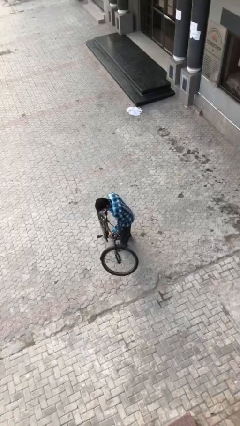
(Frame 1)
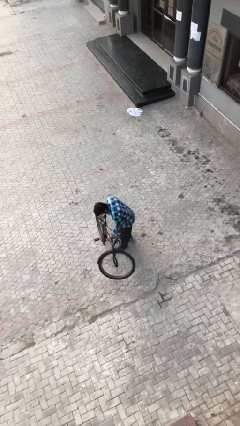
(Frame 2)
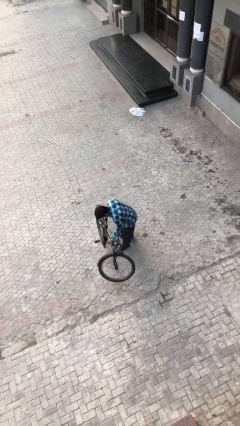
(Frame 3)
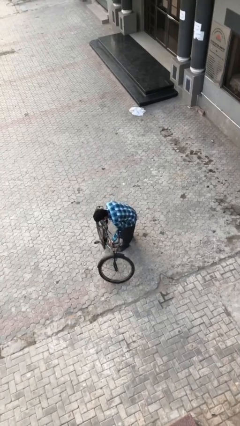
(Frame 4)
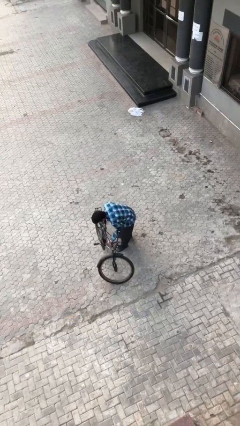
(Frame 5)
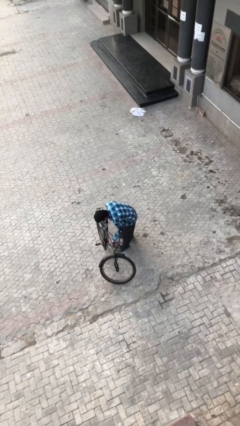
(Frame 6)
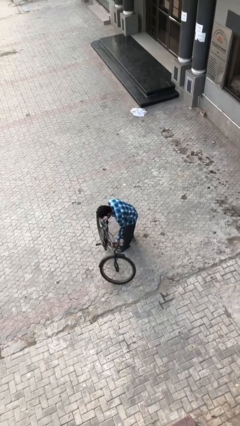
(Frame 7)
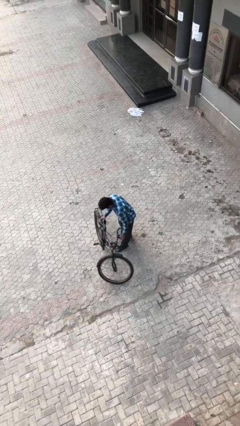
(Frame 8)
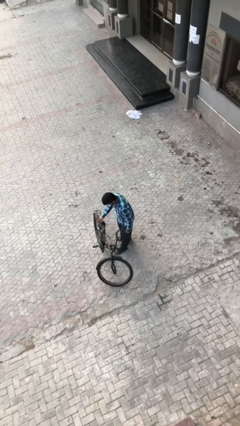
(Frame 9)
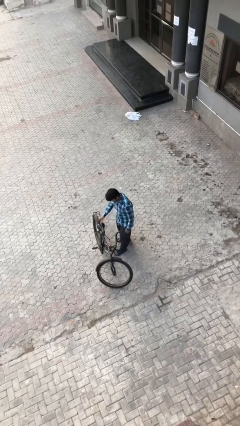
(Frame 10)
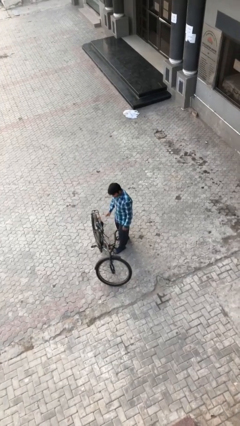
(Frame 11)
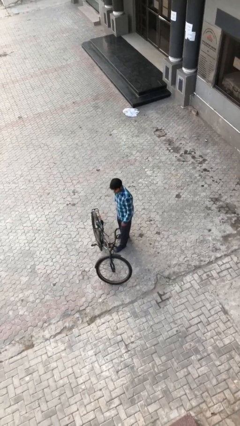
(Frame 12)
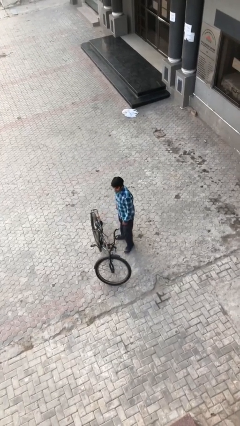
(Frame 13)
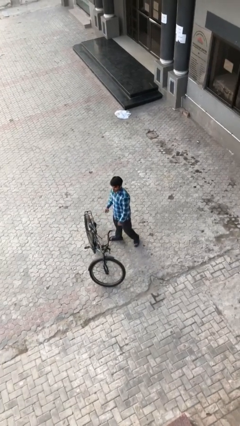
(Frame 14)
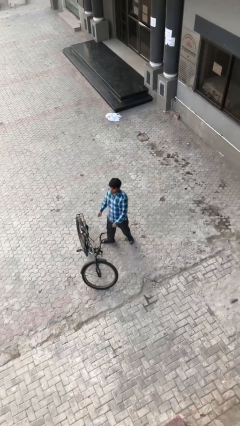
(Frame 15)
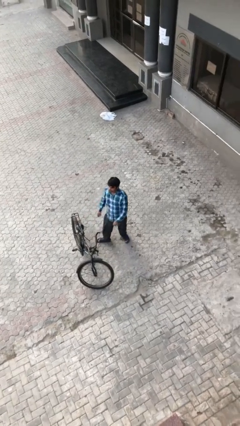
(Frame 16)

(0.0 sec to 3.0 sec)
person puts down object on floor

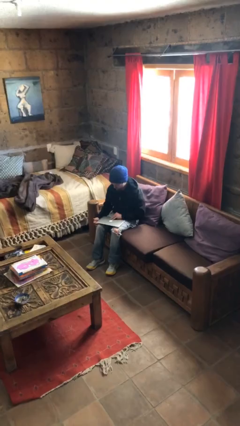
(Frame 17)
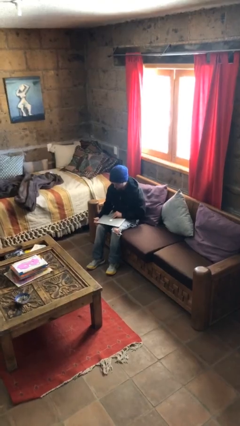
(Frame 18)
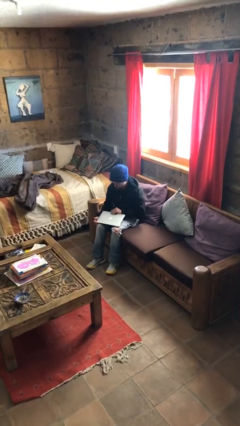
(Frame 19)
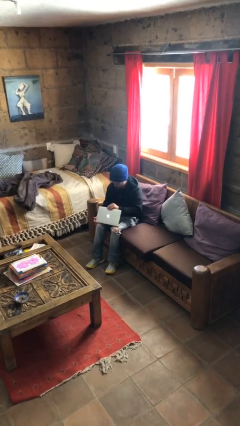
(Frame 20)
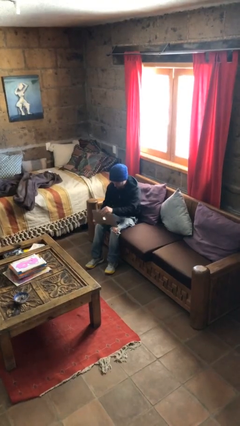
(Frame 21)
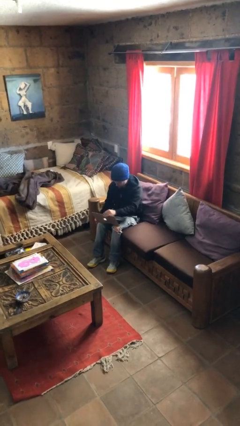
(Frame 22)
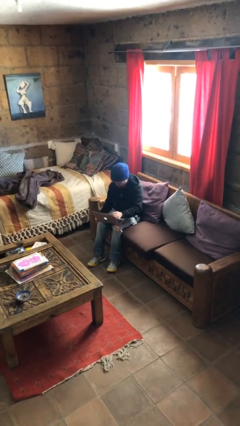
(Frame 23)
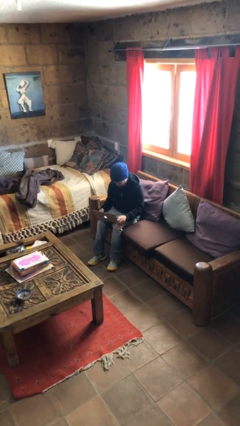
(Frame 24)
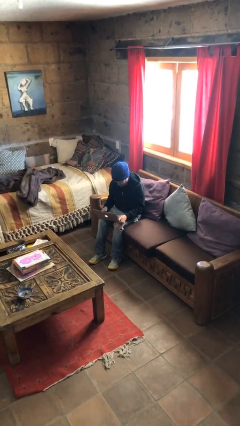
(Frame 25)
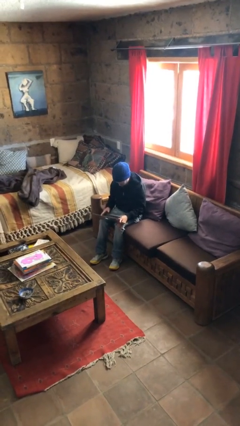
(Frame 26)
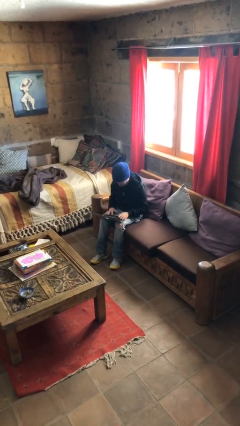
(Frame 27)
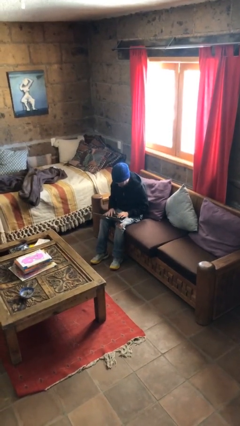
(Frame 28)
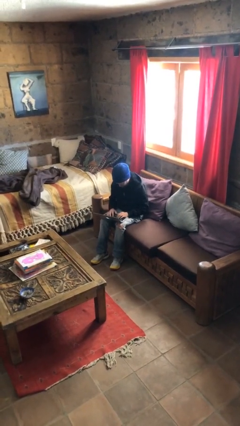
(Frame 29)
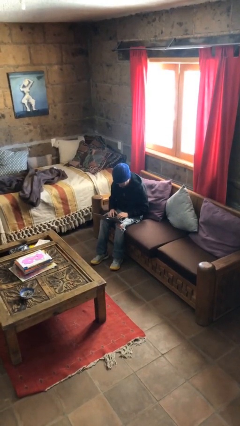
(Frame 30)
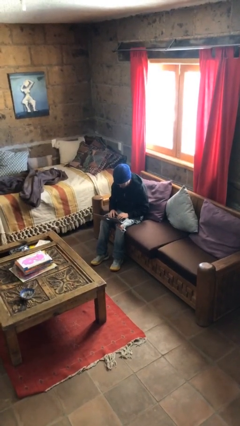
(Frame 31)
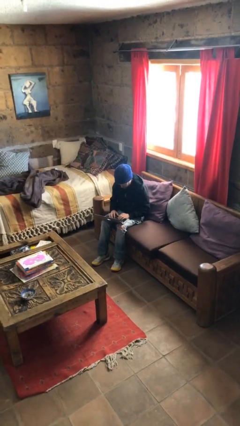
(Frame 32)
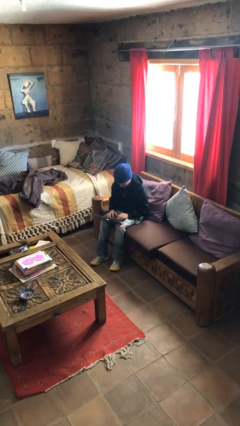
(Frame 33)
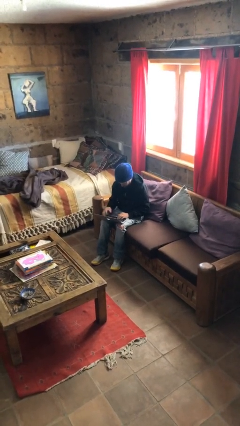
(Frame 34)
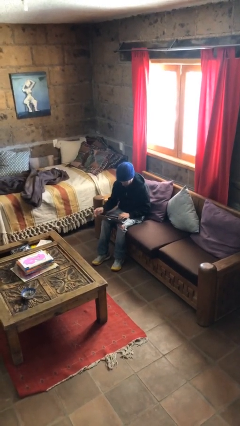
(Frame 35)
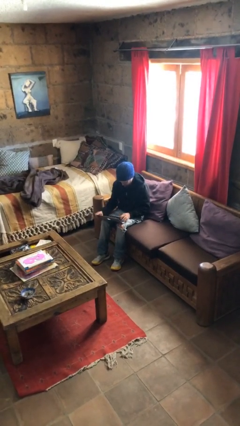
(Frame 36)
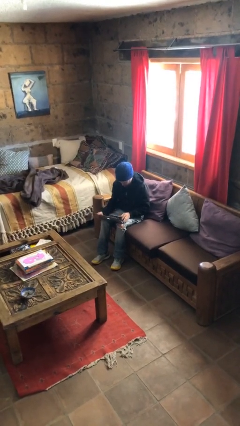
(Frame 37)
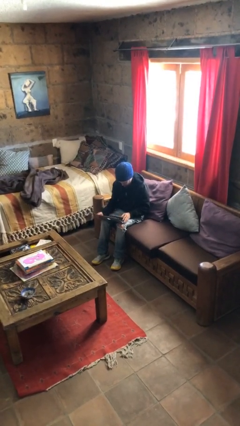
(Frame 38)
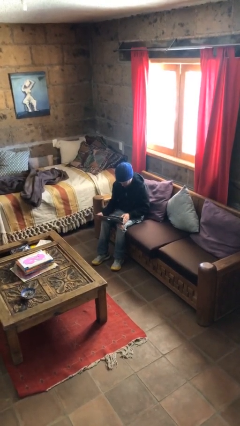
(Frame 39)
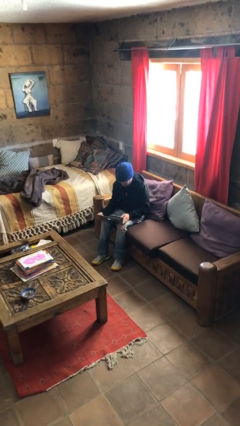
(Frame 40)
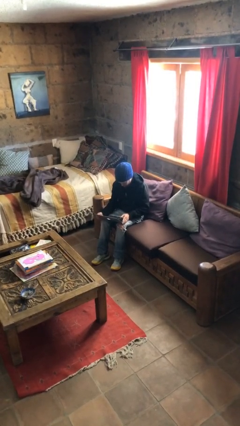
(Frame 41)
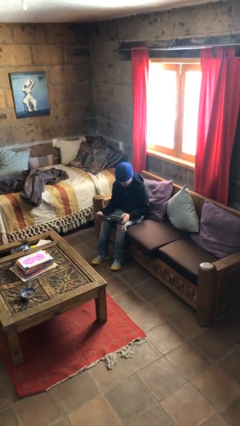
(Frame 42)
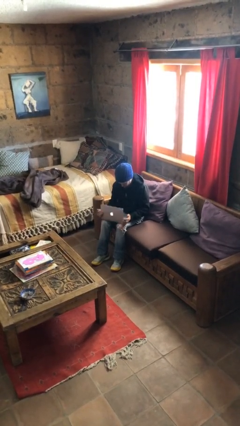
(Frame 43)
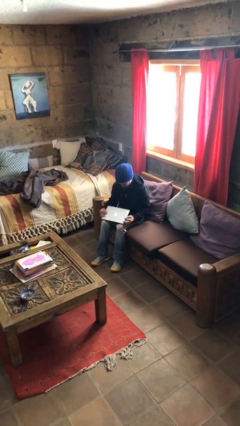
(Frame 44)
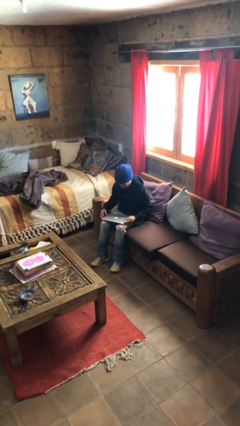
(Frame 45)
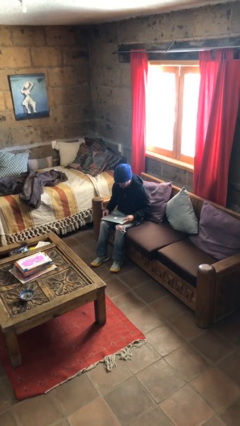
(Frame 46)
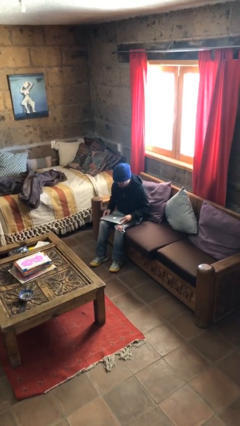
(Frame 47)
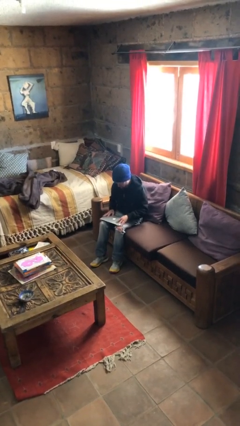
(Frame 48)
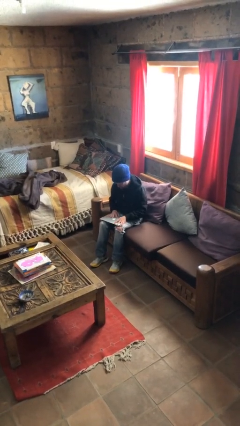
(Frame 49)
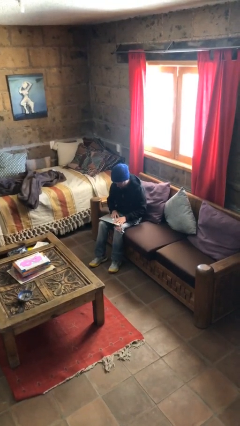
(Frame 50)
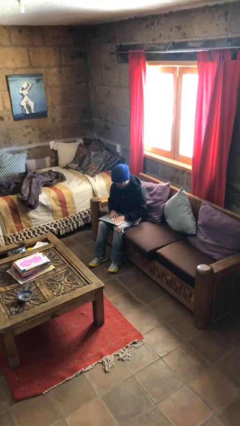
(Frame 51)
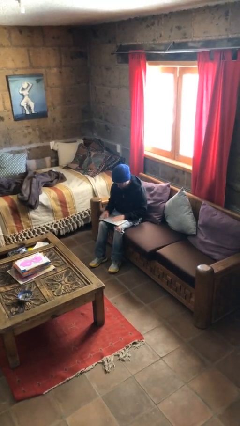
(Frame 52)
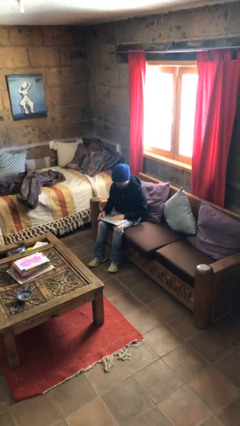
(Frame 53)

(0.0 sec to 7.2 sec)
person interacts with laptop

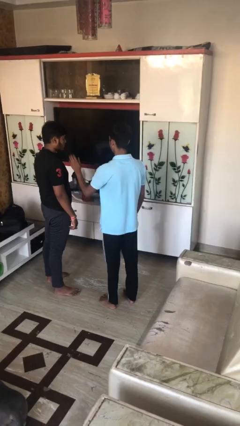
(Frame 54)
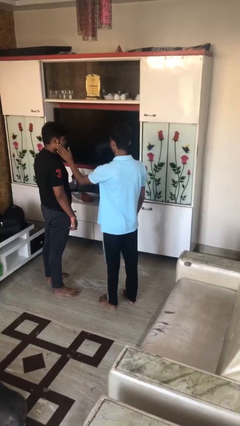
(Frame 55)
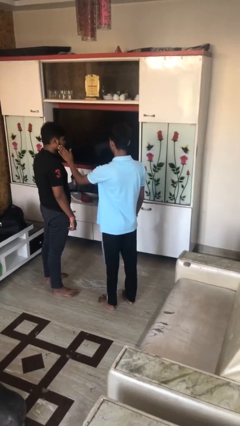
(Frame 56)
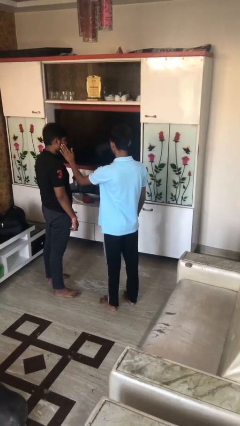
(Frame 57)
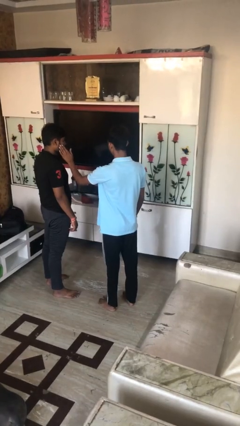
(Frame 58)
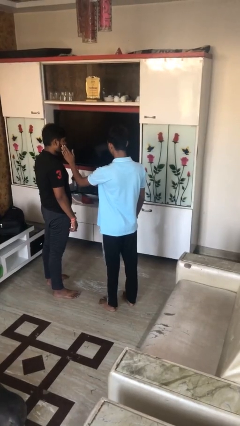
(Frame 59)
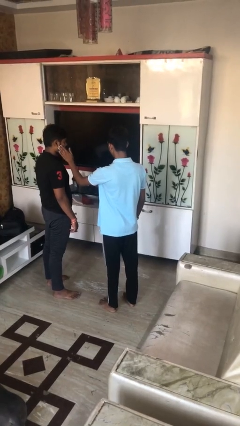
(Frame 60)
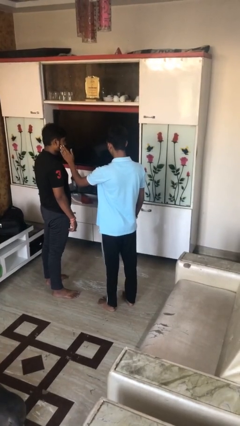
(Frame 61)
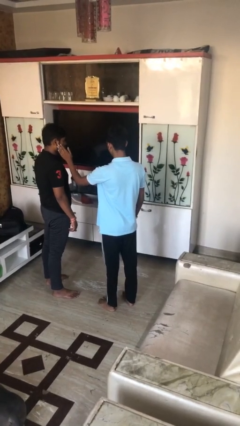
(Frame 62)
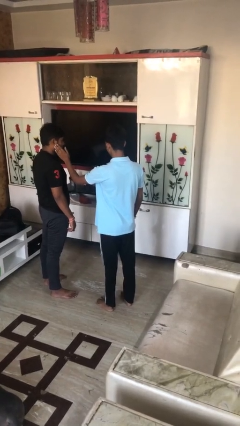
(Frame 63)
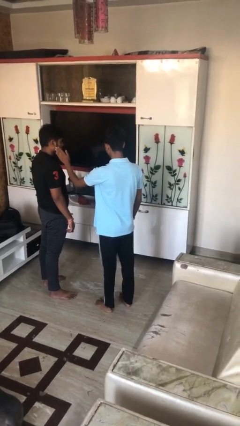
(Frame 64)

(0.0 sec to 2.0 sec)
person touches face of person

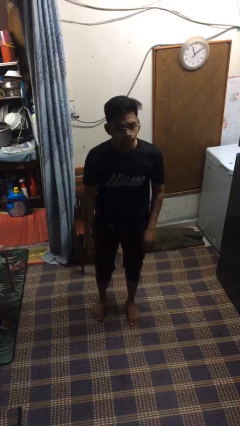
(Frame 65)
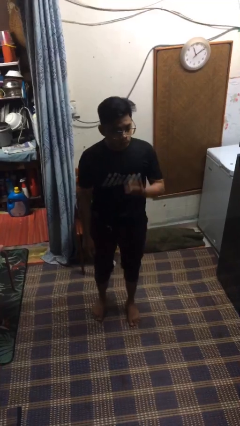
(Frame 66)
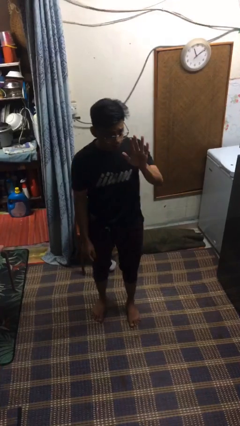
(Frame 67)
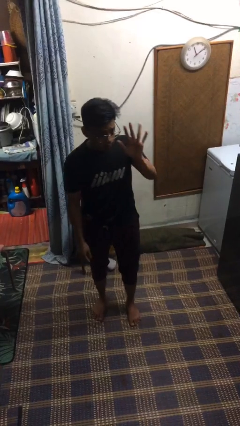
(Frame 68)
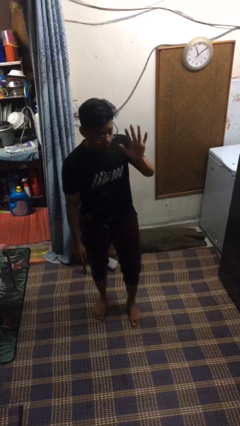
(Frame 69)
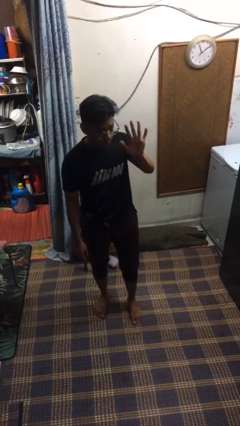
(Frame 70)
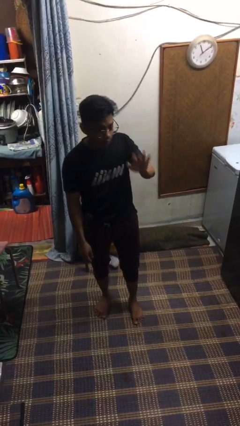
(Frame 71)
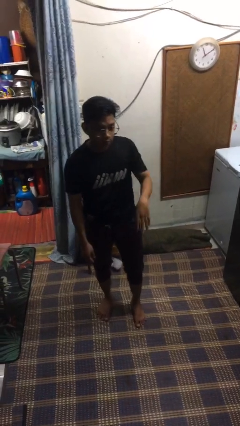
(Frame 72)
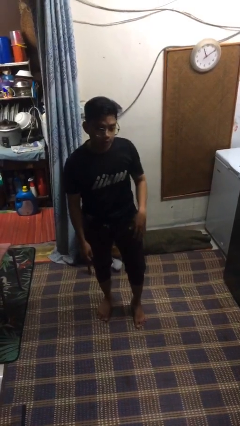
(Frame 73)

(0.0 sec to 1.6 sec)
person gestures stop

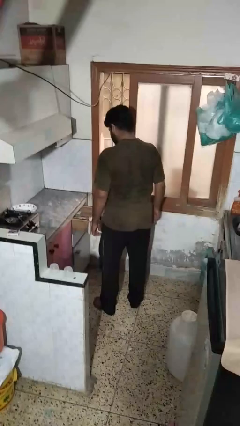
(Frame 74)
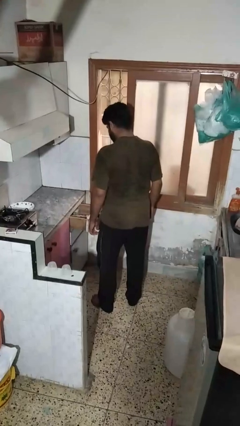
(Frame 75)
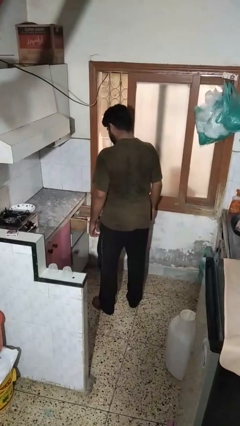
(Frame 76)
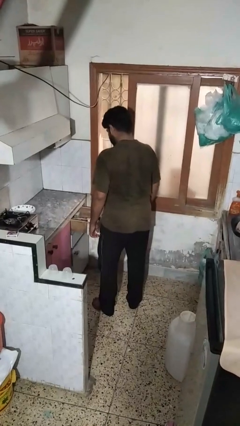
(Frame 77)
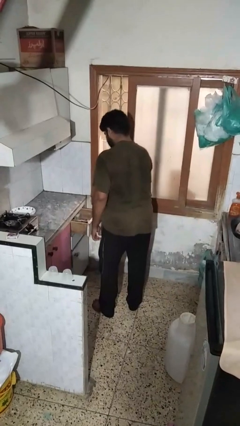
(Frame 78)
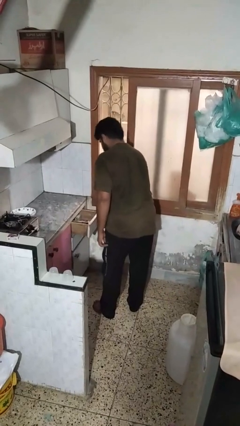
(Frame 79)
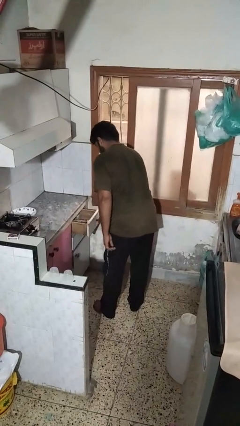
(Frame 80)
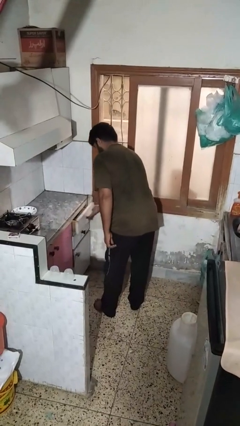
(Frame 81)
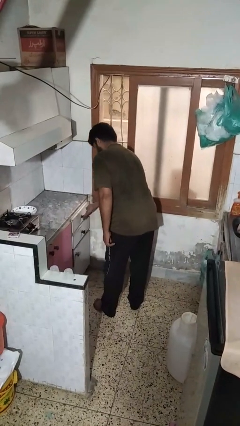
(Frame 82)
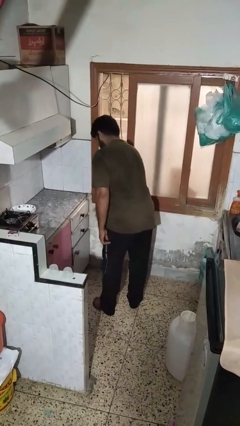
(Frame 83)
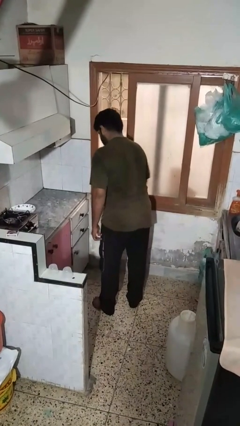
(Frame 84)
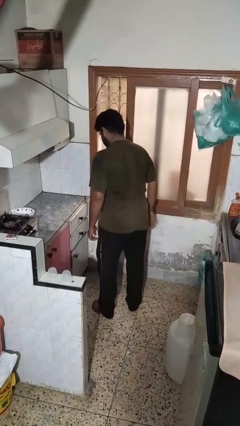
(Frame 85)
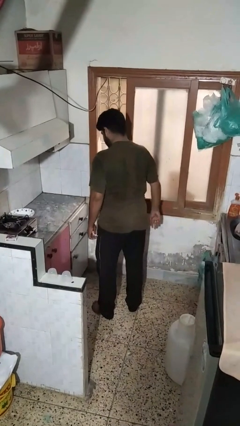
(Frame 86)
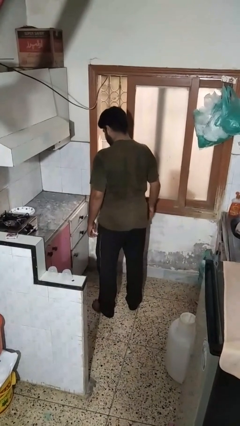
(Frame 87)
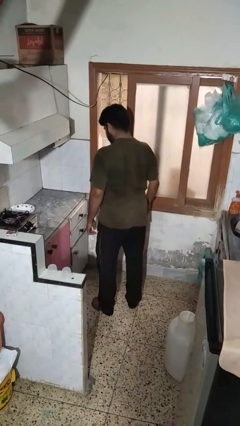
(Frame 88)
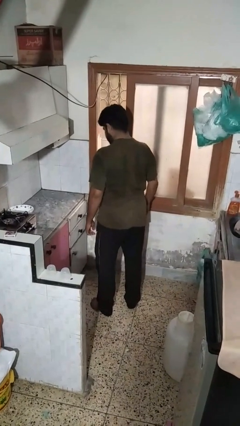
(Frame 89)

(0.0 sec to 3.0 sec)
person closes kitchen drawer

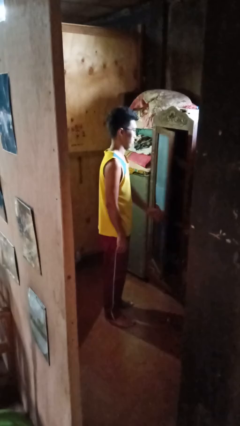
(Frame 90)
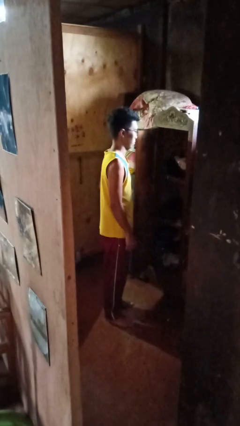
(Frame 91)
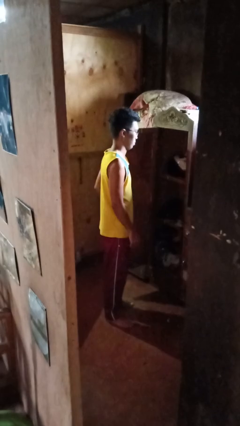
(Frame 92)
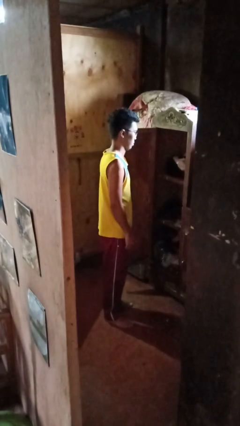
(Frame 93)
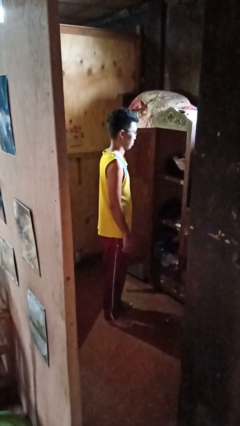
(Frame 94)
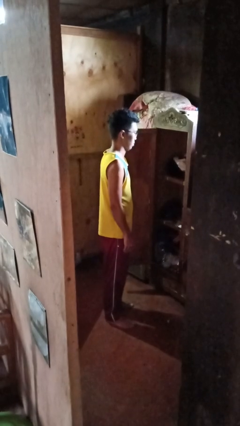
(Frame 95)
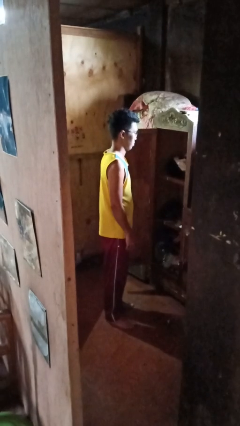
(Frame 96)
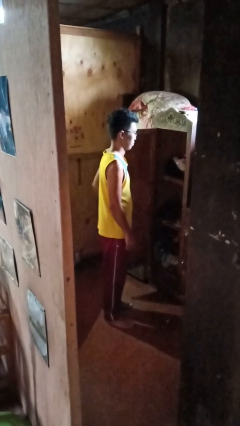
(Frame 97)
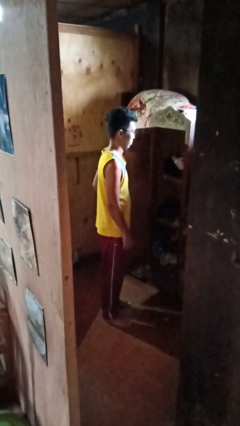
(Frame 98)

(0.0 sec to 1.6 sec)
person opens closet door
